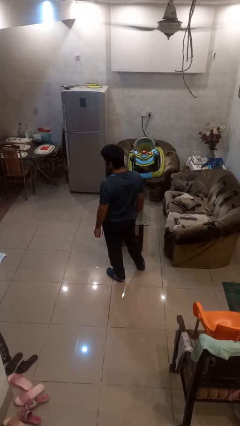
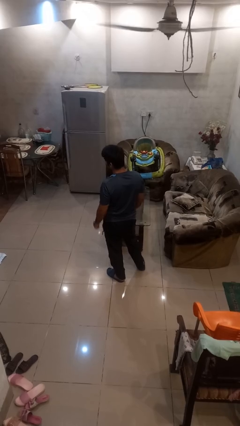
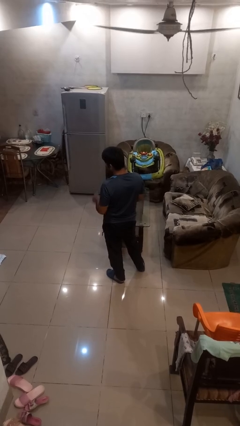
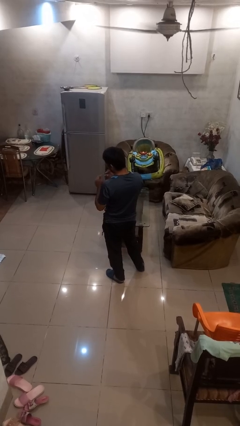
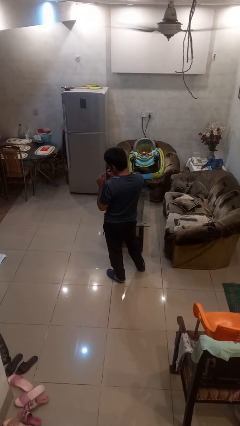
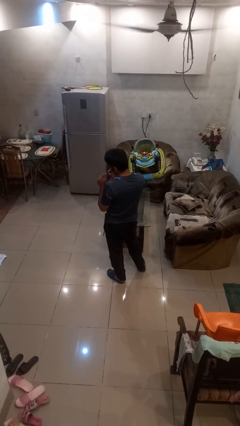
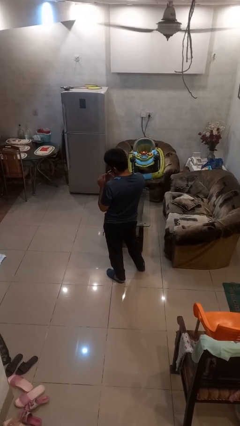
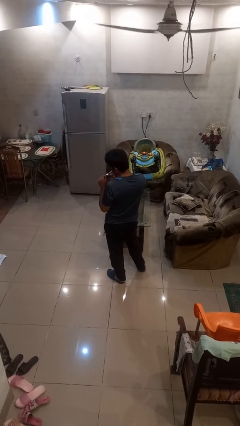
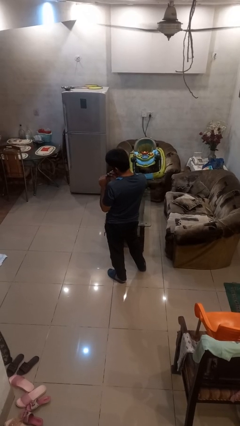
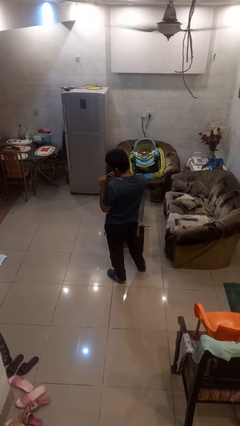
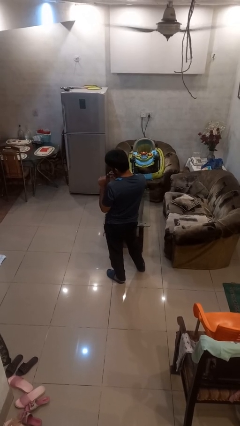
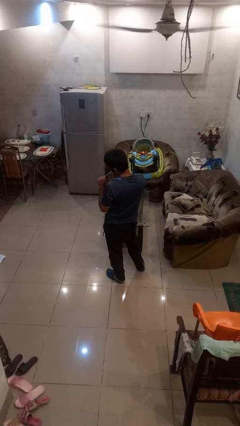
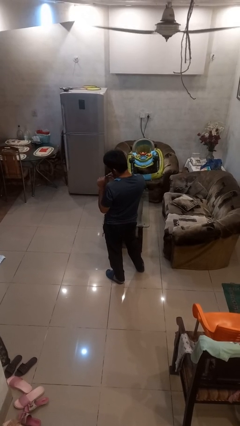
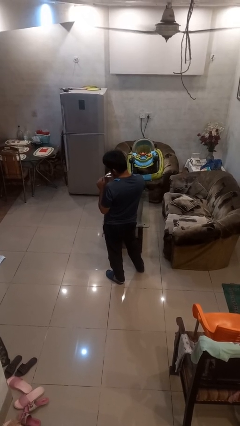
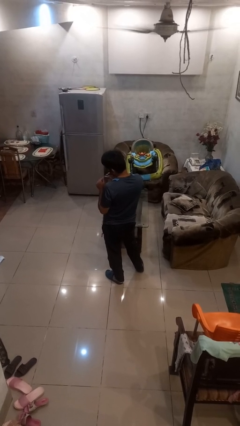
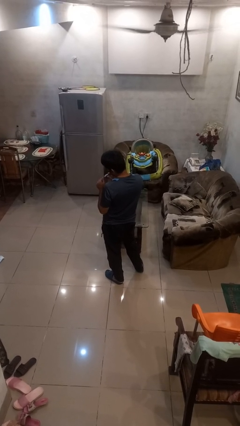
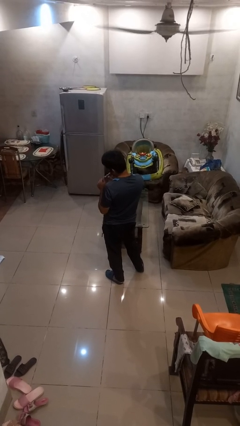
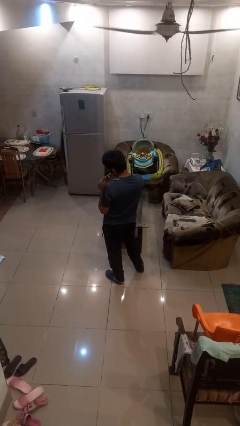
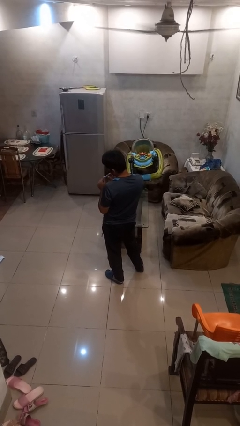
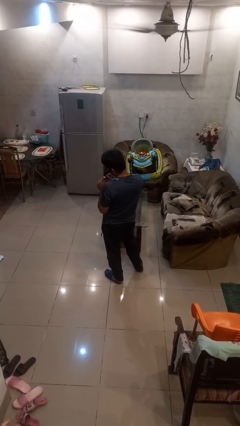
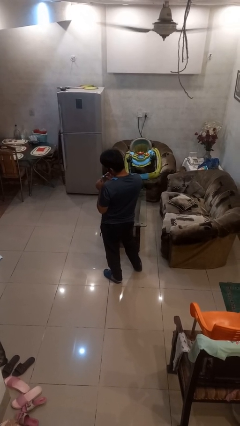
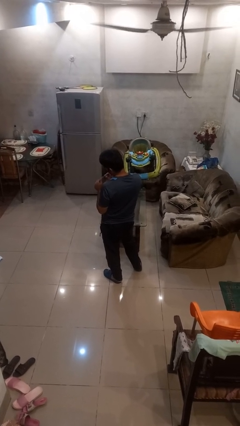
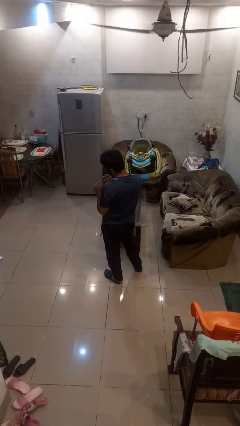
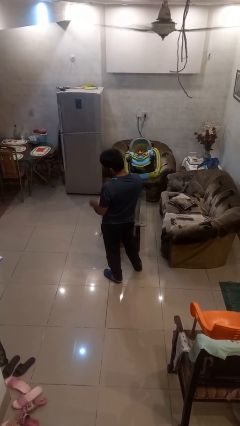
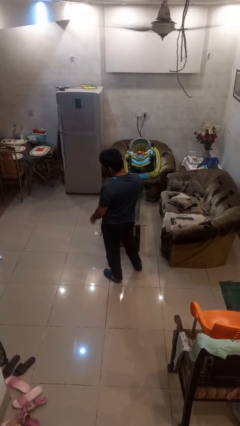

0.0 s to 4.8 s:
person clips fingernails

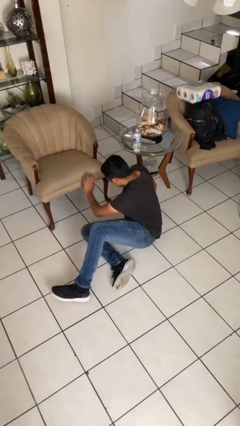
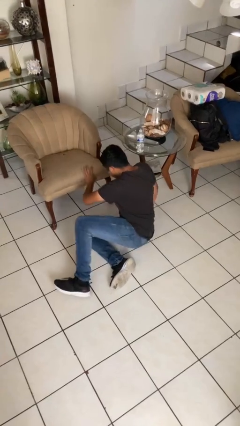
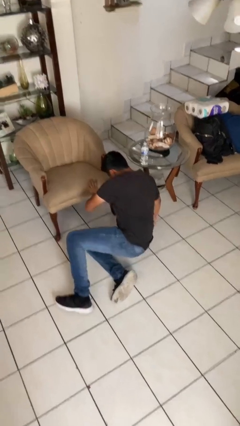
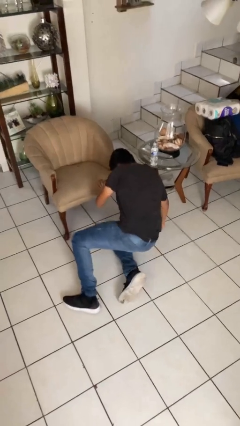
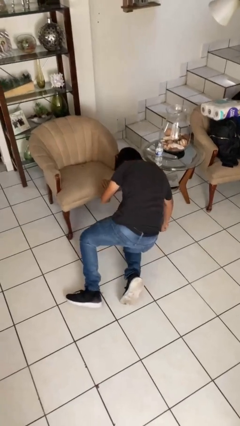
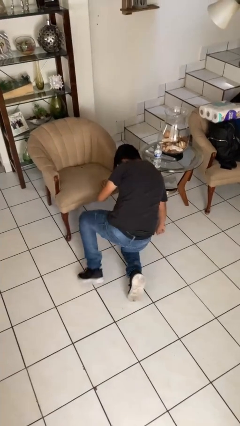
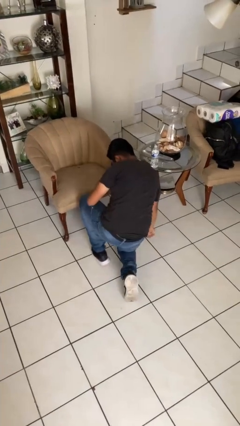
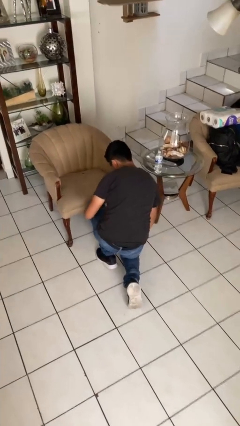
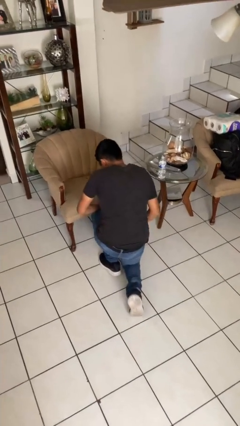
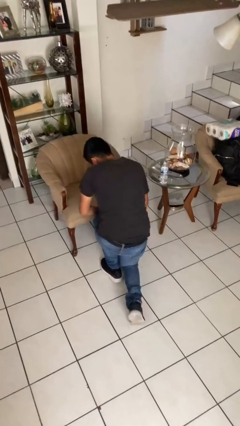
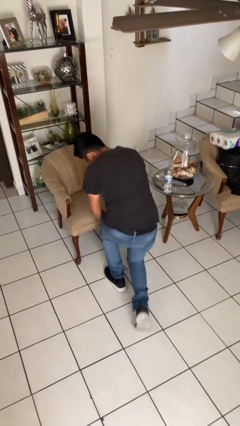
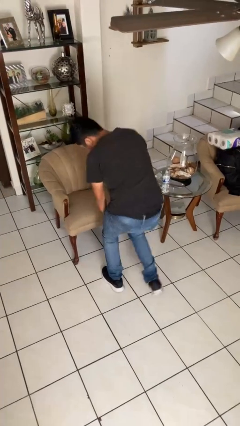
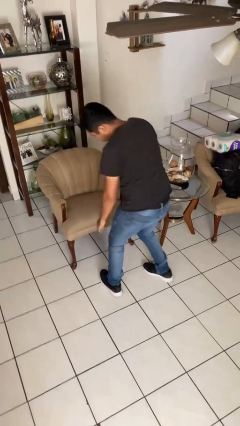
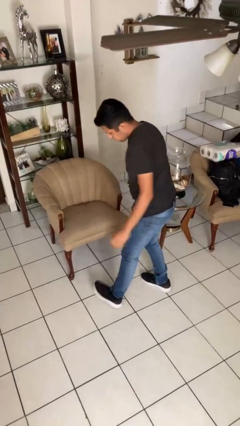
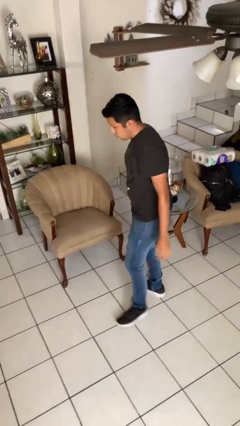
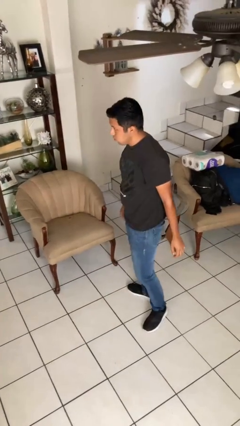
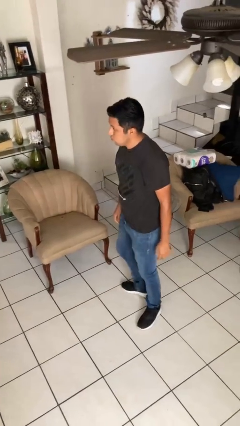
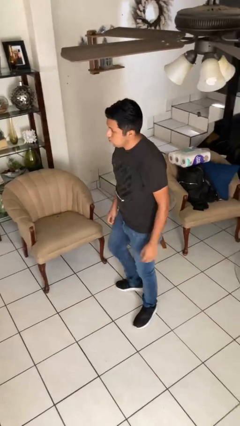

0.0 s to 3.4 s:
person stands up from floor

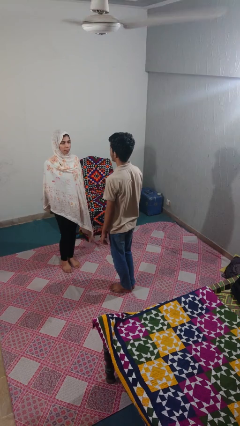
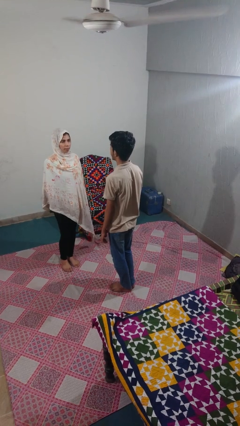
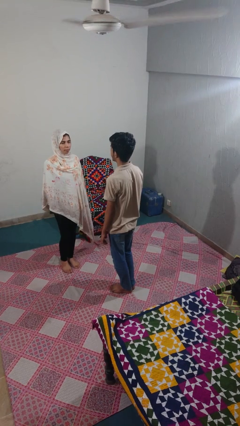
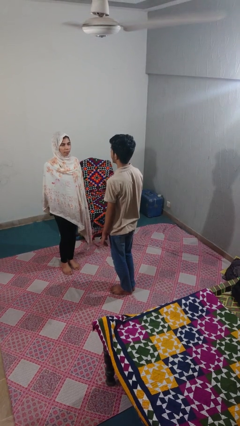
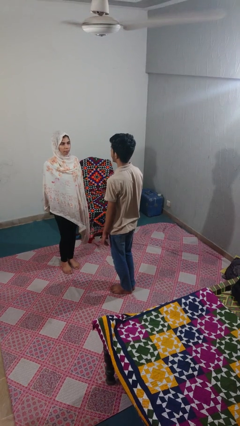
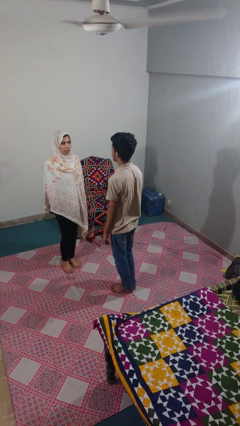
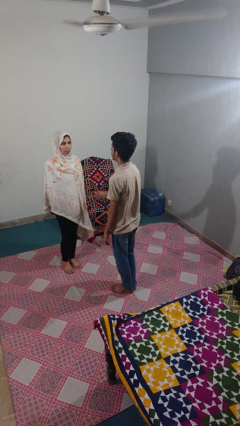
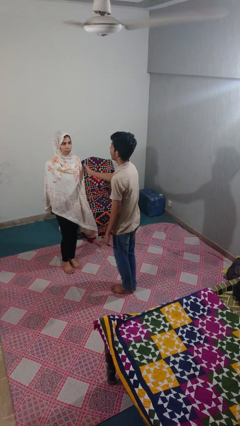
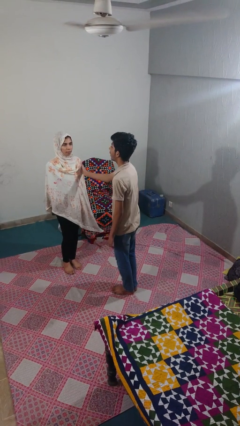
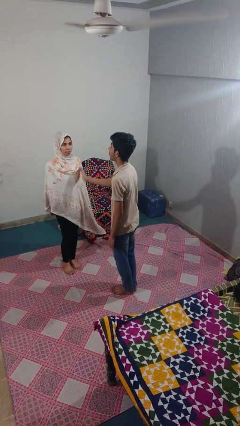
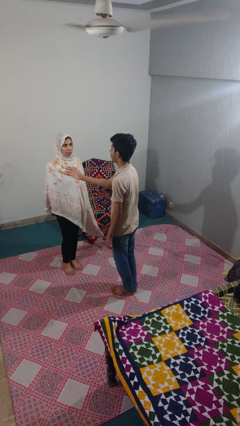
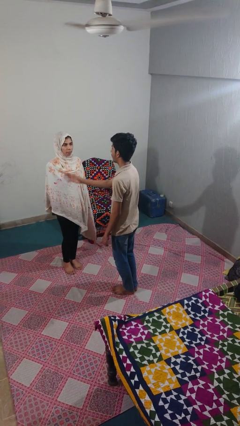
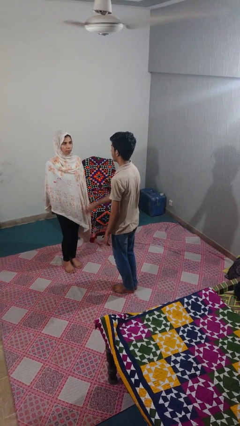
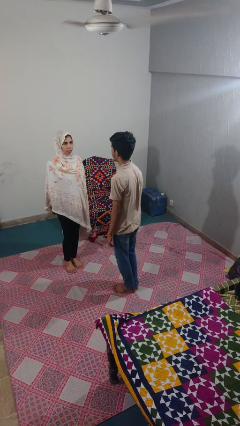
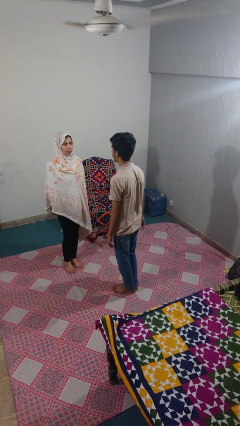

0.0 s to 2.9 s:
person shoves person

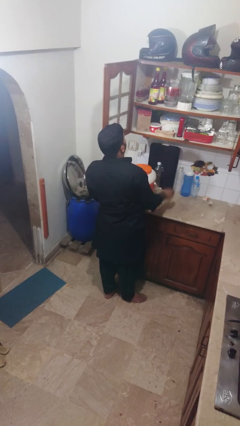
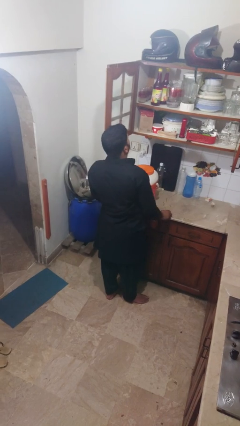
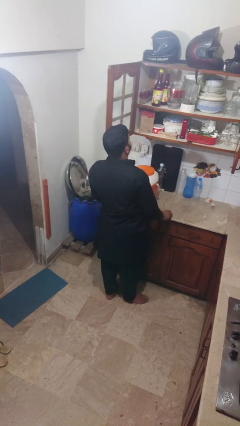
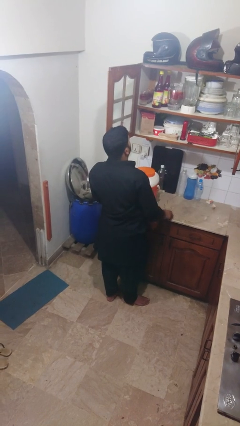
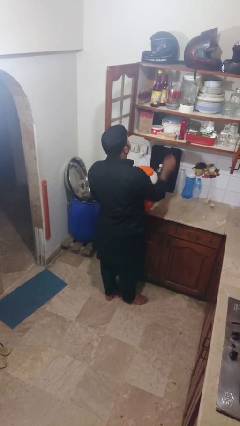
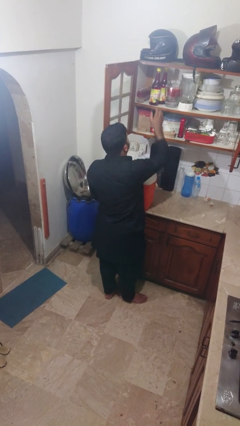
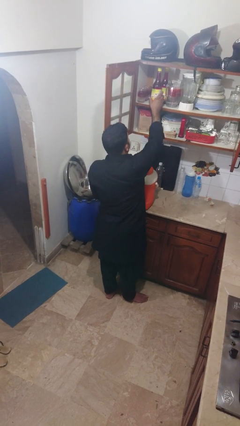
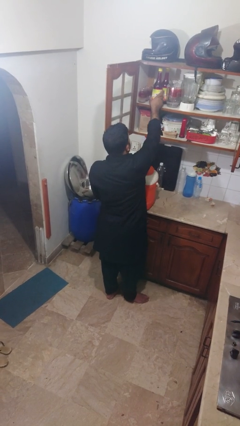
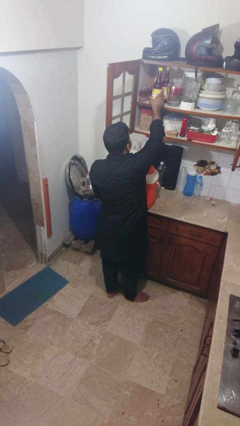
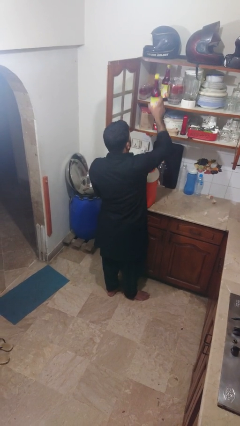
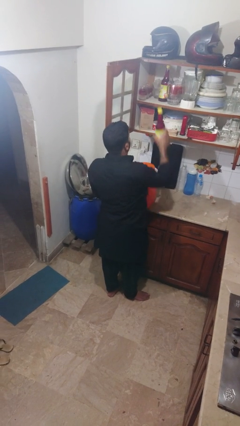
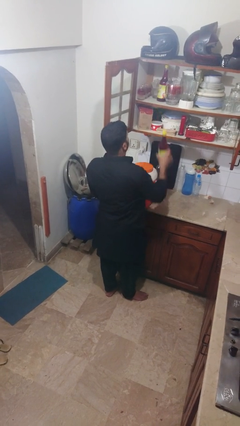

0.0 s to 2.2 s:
person picks up object from cabinet

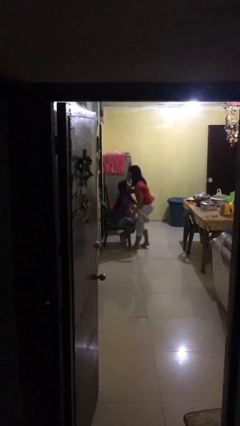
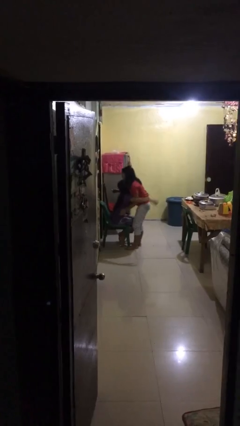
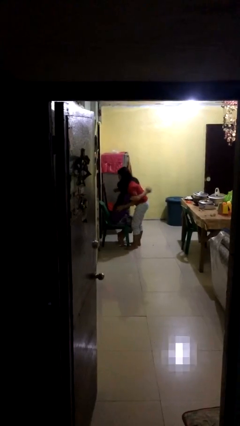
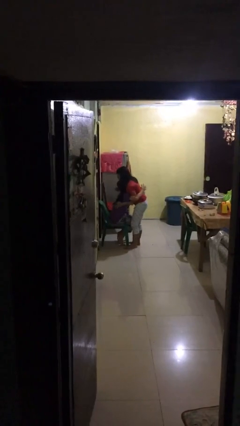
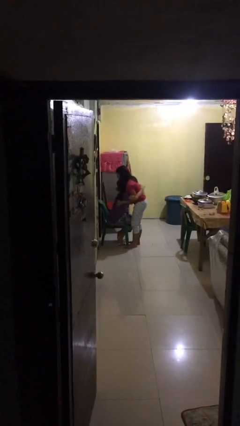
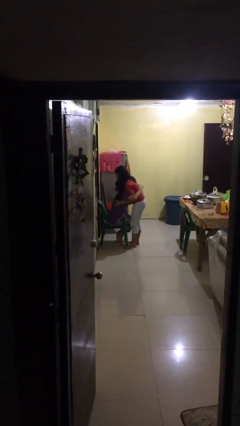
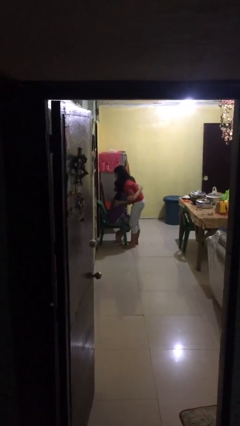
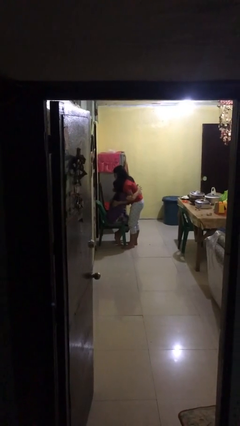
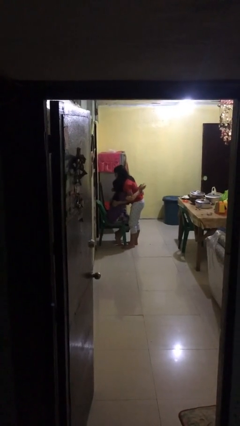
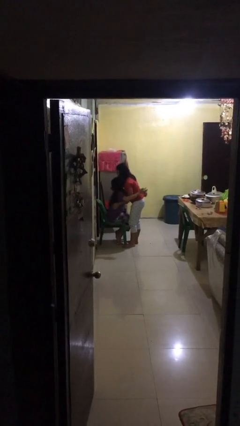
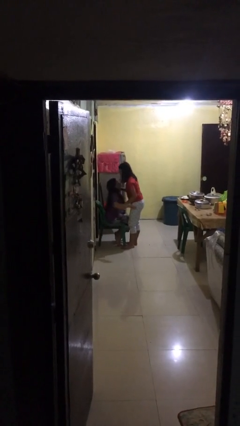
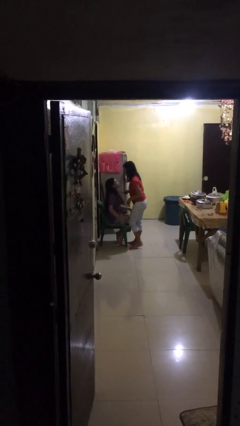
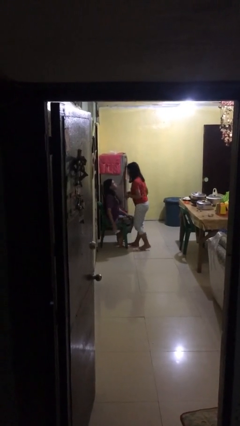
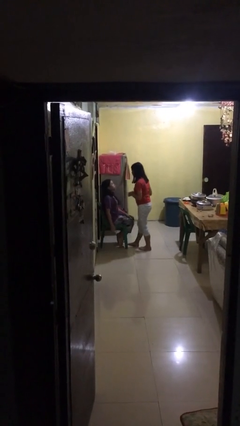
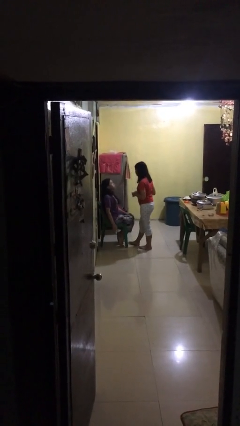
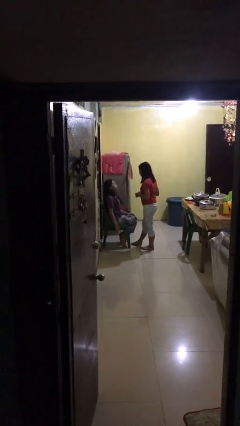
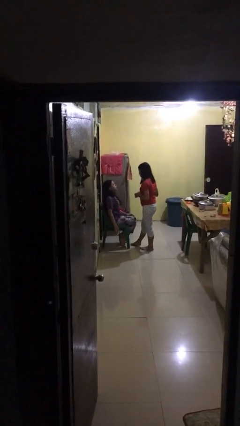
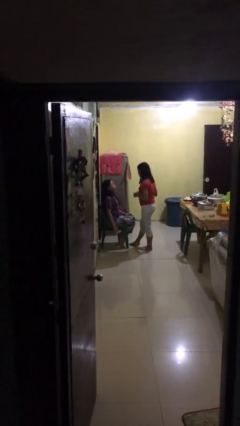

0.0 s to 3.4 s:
person embraces person

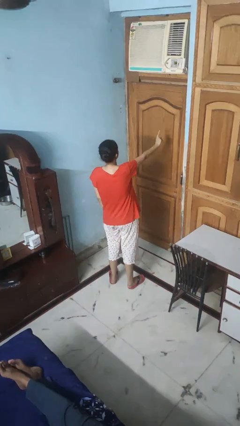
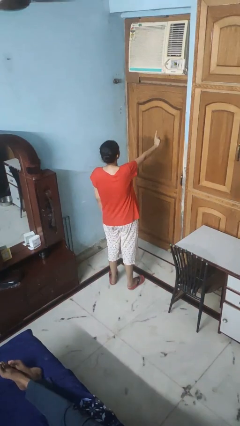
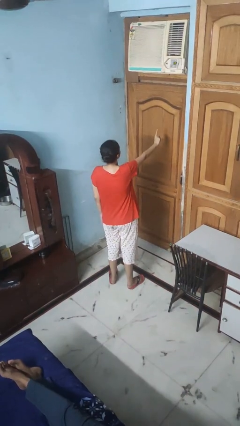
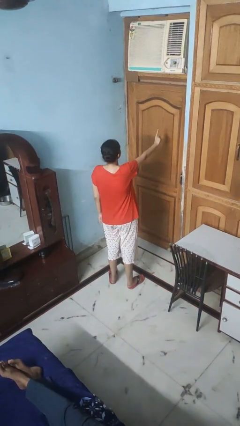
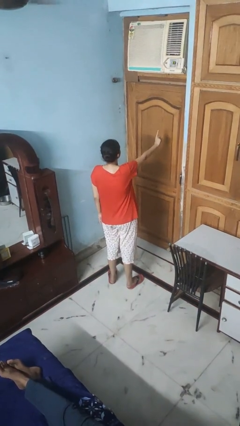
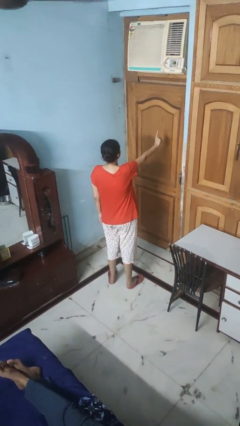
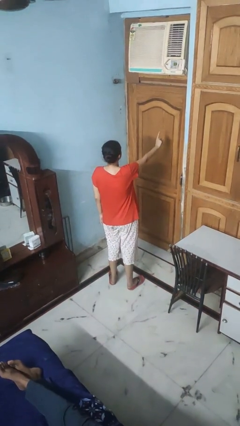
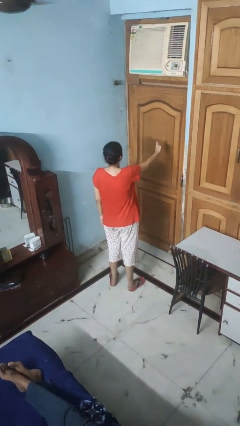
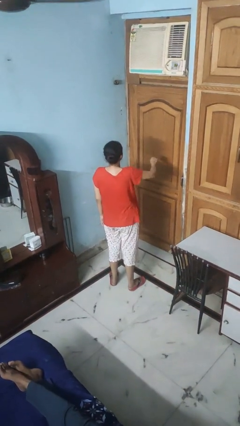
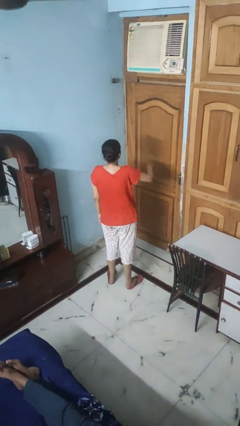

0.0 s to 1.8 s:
person gestures number one
